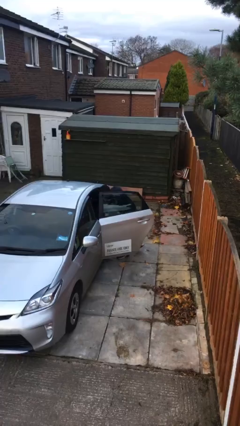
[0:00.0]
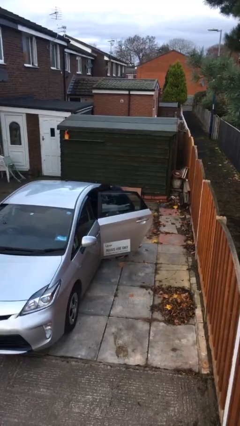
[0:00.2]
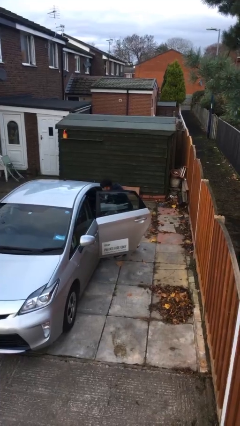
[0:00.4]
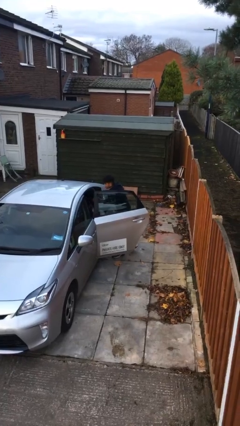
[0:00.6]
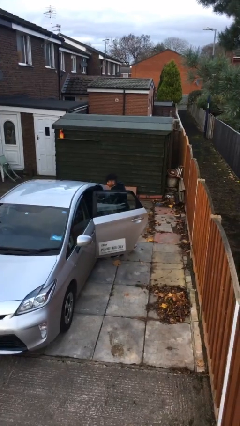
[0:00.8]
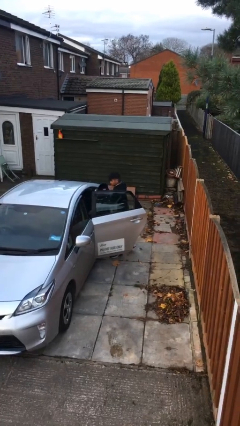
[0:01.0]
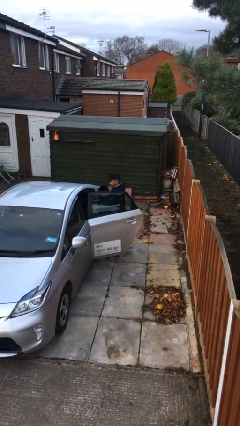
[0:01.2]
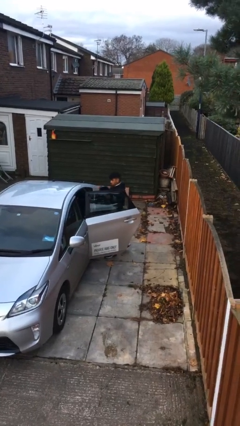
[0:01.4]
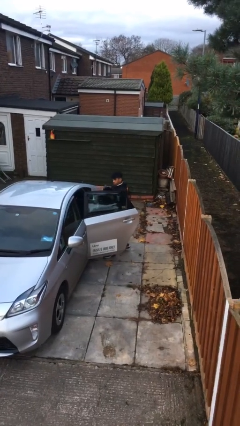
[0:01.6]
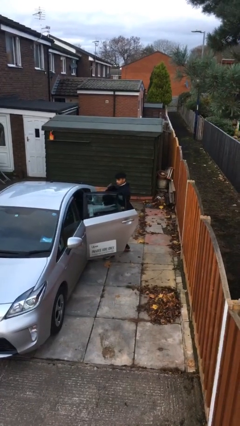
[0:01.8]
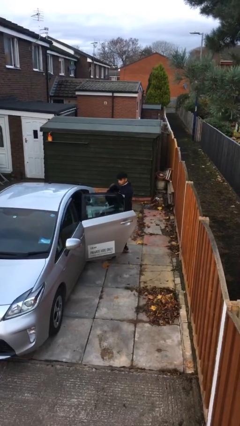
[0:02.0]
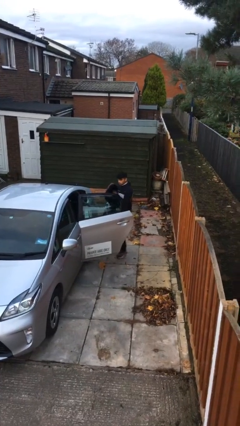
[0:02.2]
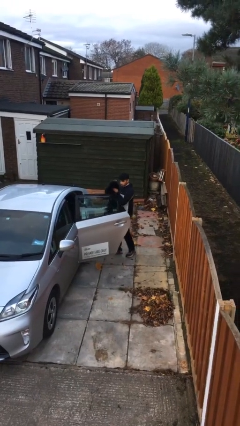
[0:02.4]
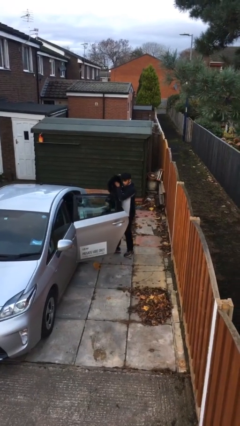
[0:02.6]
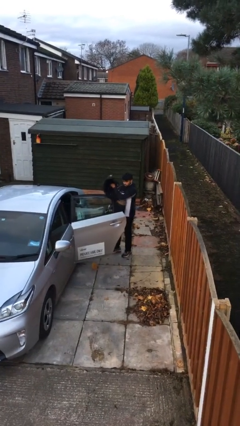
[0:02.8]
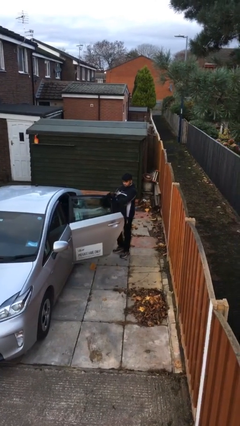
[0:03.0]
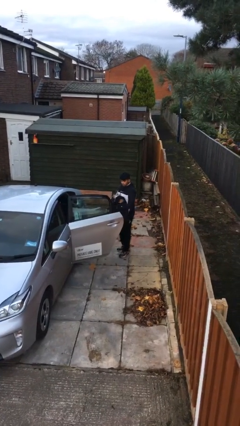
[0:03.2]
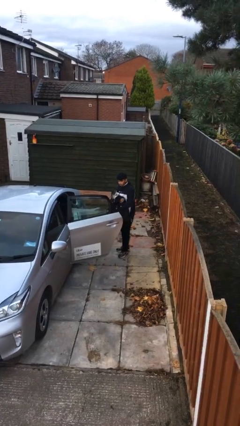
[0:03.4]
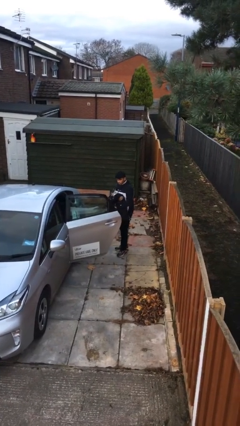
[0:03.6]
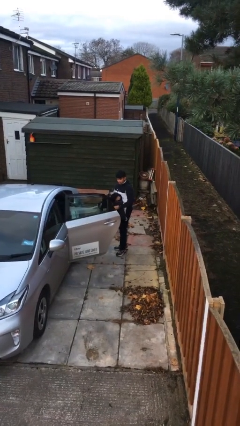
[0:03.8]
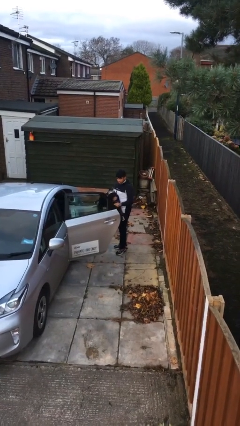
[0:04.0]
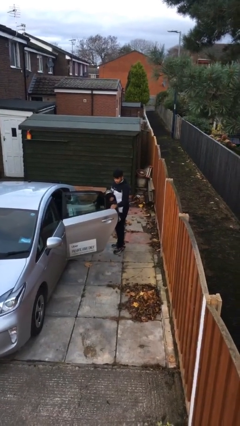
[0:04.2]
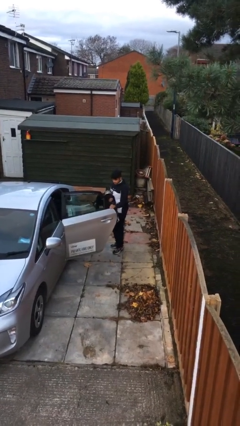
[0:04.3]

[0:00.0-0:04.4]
person unloads car

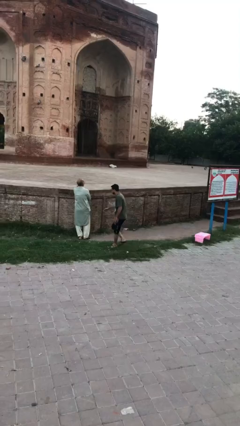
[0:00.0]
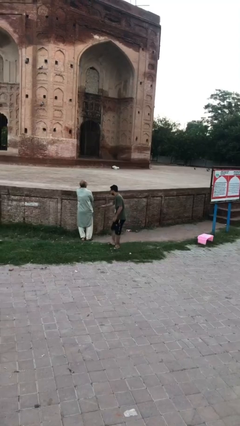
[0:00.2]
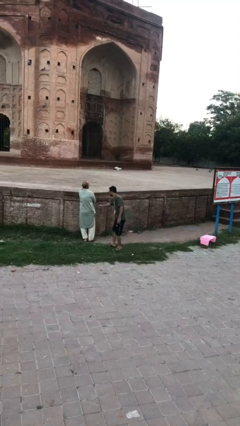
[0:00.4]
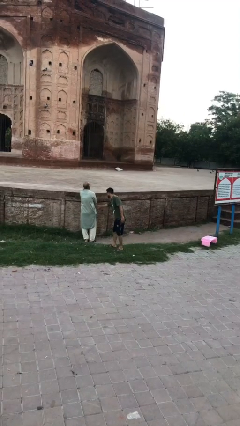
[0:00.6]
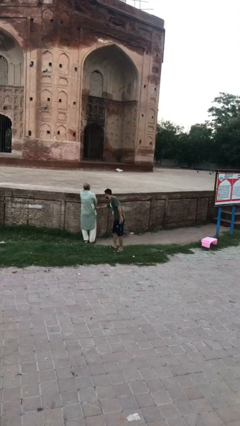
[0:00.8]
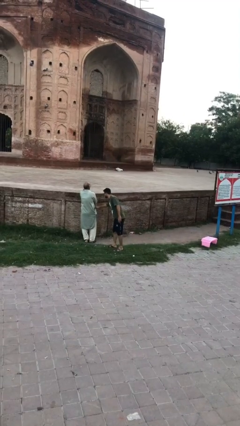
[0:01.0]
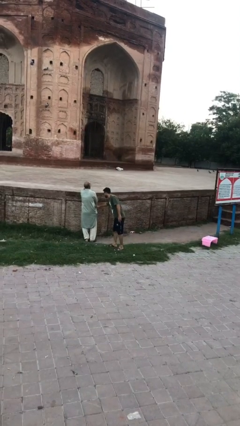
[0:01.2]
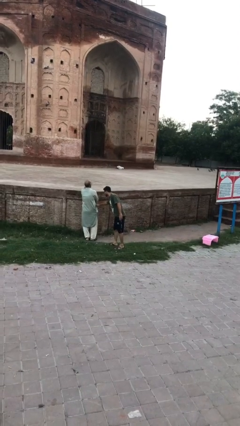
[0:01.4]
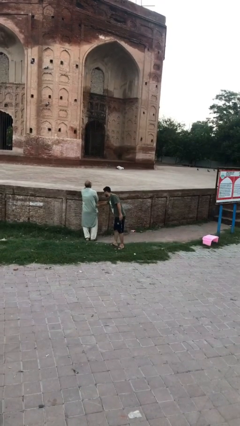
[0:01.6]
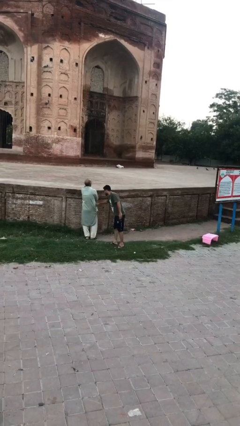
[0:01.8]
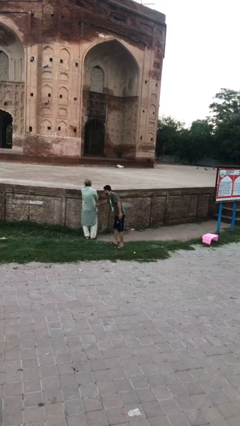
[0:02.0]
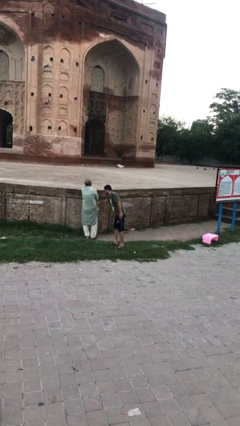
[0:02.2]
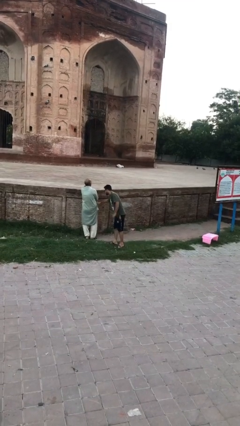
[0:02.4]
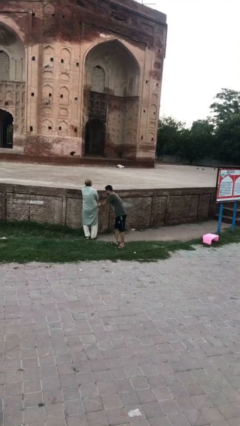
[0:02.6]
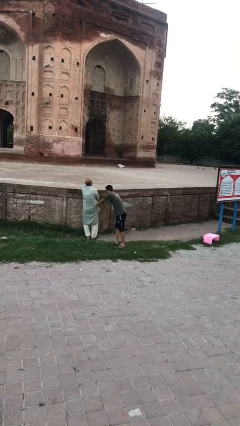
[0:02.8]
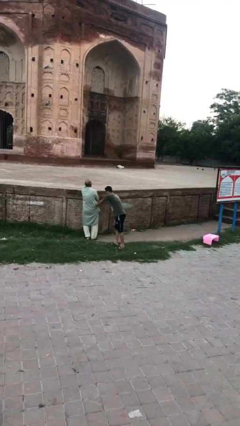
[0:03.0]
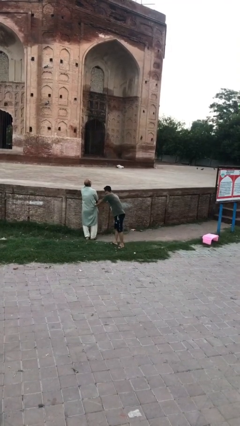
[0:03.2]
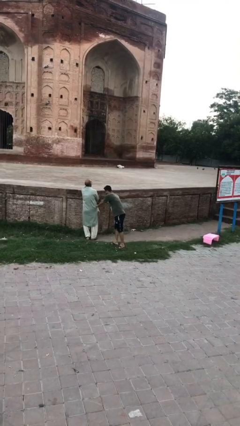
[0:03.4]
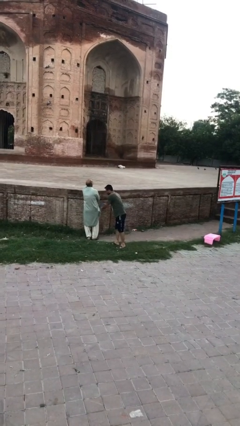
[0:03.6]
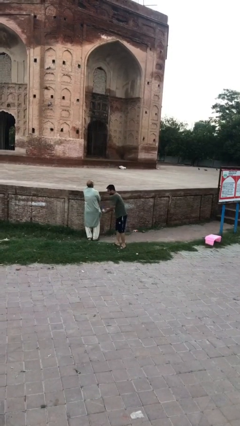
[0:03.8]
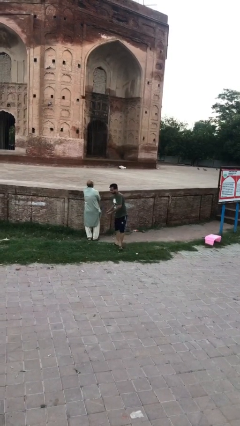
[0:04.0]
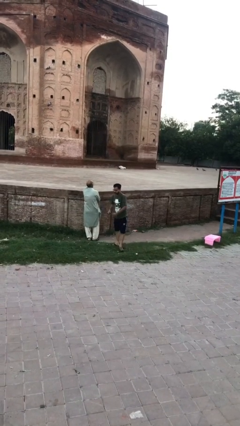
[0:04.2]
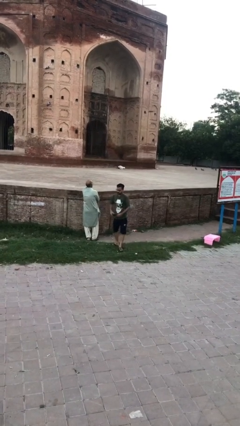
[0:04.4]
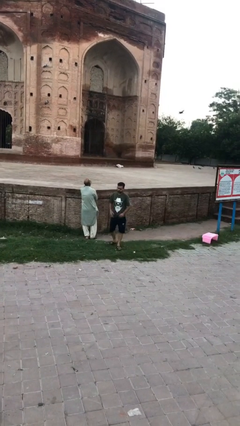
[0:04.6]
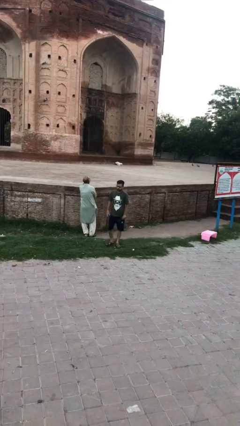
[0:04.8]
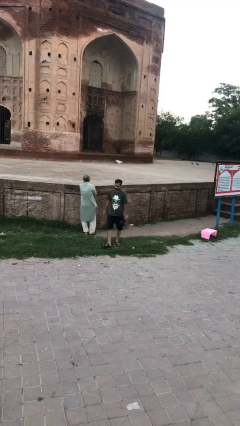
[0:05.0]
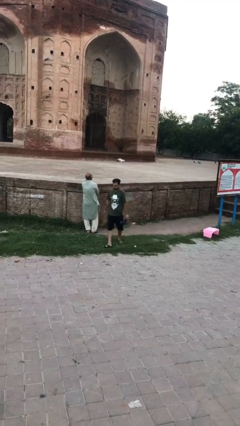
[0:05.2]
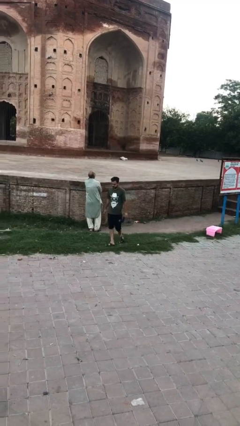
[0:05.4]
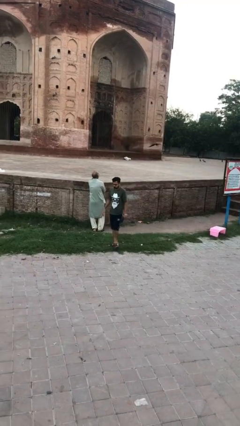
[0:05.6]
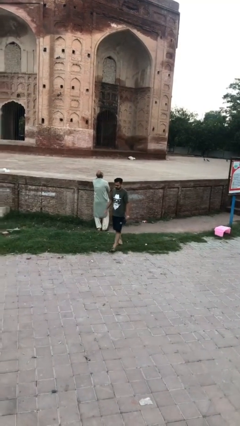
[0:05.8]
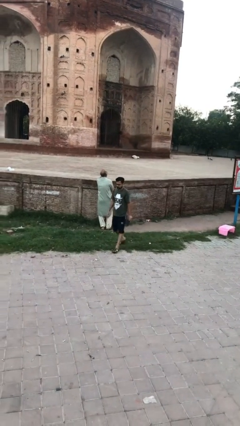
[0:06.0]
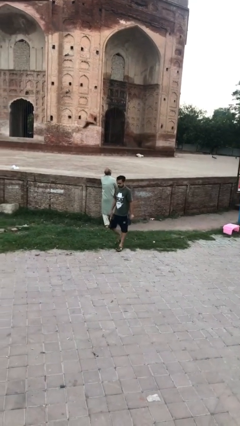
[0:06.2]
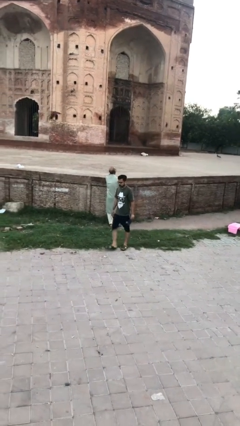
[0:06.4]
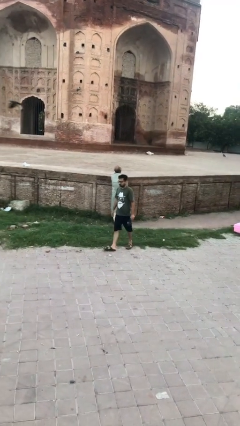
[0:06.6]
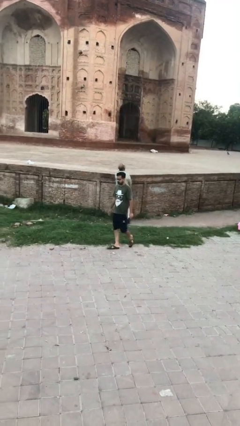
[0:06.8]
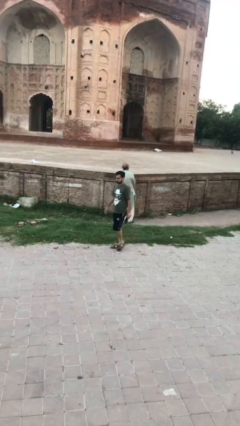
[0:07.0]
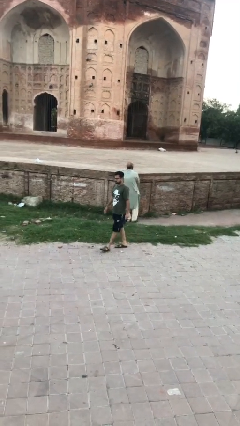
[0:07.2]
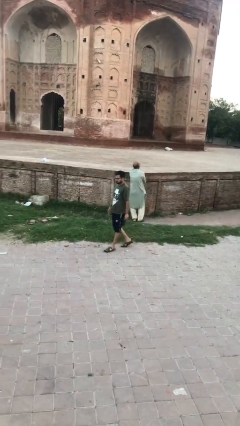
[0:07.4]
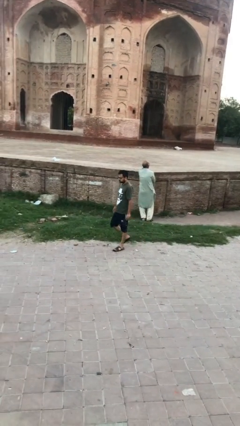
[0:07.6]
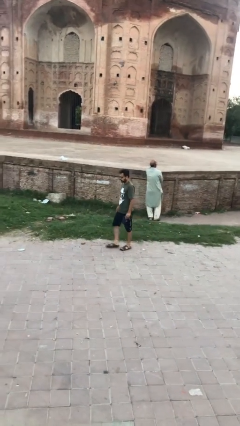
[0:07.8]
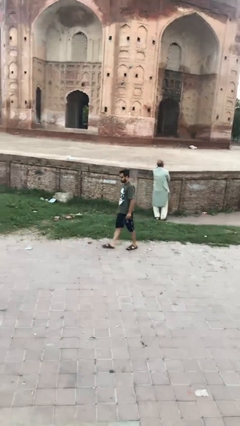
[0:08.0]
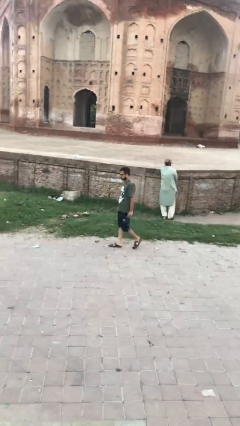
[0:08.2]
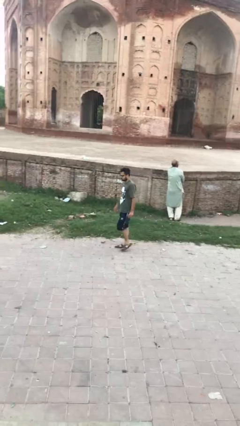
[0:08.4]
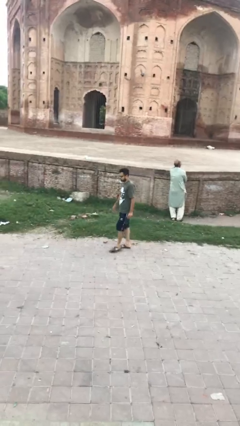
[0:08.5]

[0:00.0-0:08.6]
person steals object from person

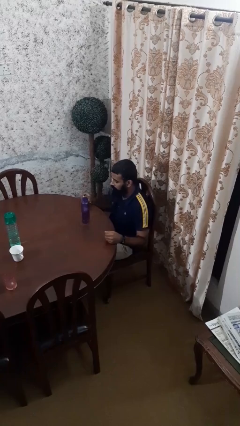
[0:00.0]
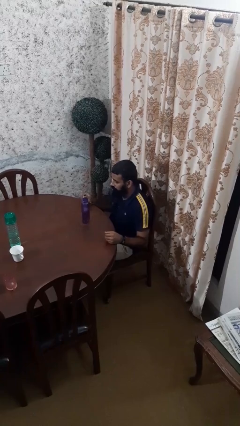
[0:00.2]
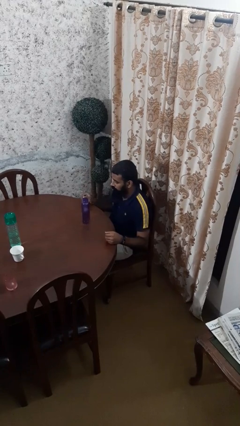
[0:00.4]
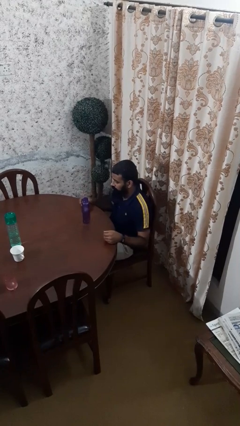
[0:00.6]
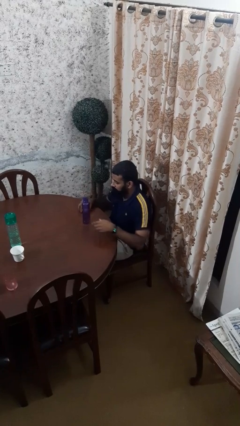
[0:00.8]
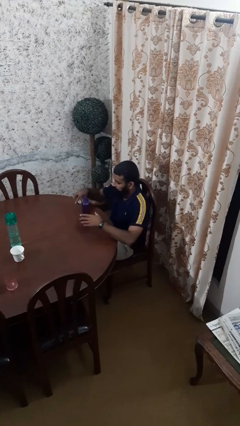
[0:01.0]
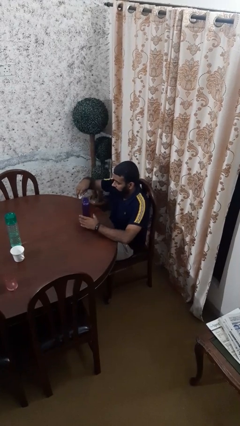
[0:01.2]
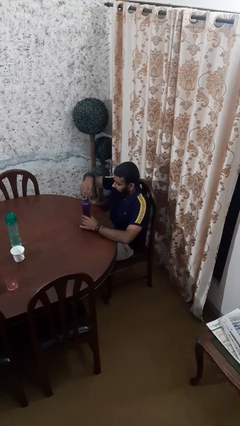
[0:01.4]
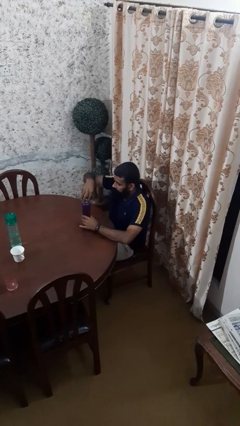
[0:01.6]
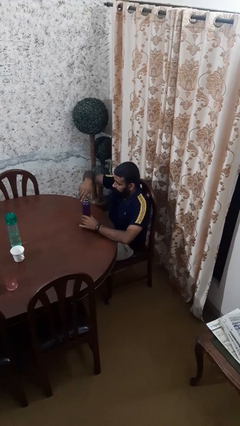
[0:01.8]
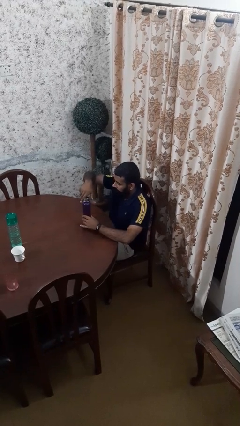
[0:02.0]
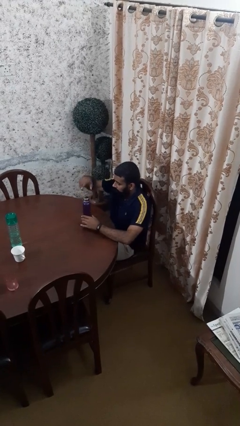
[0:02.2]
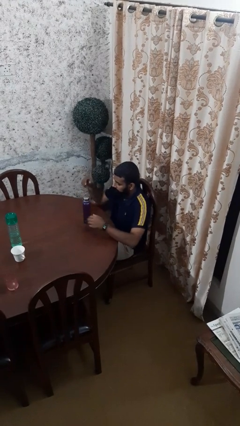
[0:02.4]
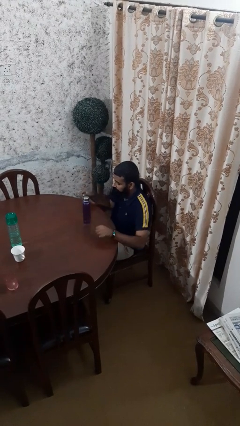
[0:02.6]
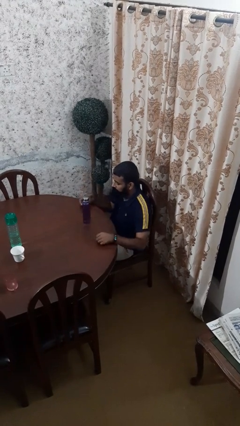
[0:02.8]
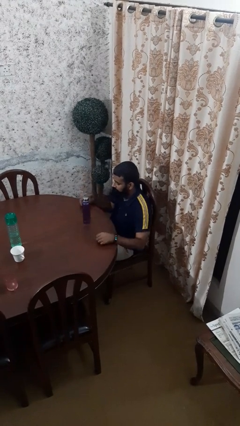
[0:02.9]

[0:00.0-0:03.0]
person screws lid to bottle

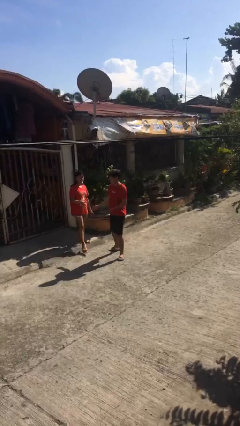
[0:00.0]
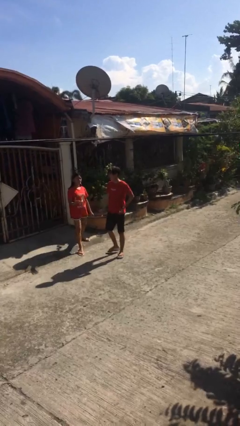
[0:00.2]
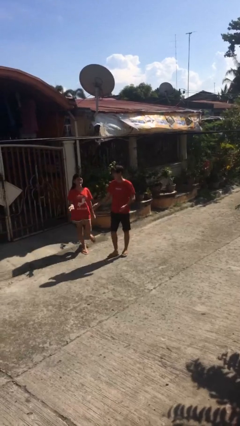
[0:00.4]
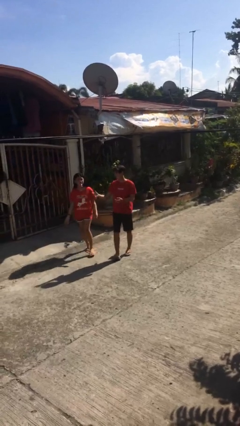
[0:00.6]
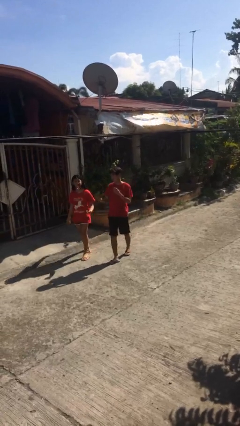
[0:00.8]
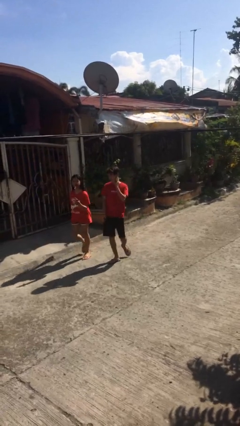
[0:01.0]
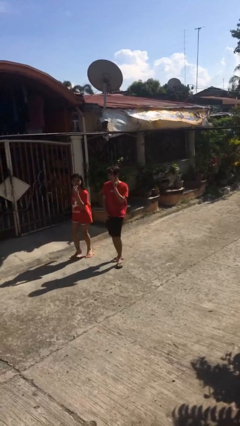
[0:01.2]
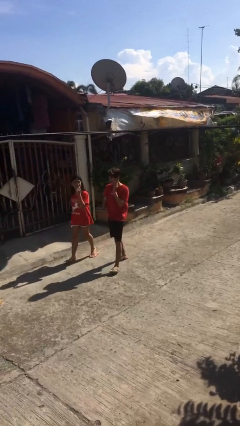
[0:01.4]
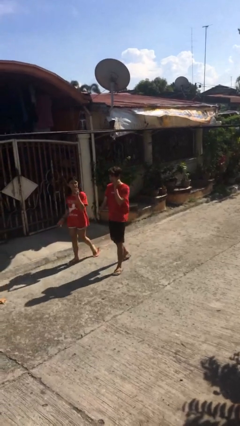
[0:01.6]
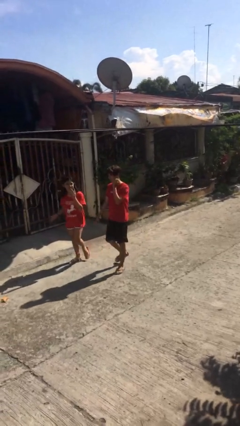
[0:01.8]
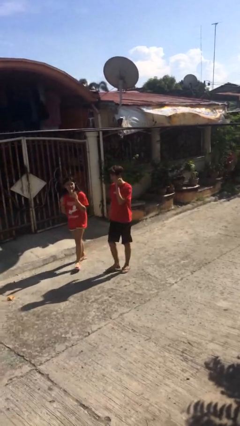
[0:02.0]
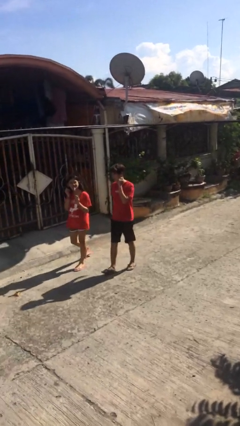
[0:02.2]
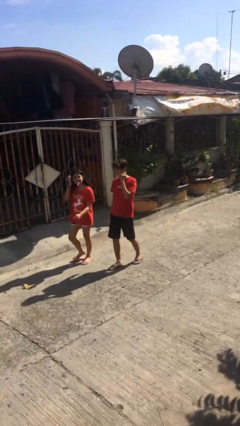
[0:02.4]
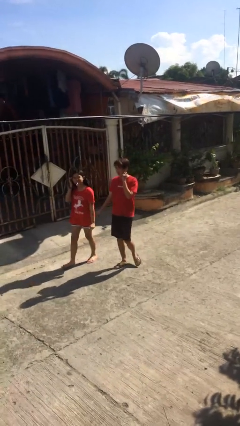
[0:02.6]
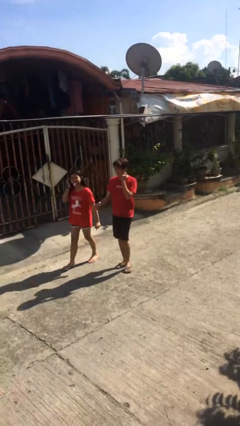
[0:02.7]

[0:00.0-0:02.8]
person talks to person
